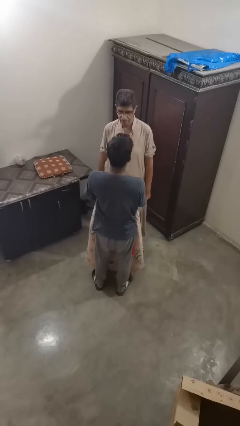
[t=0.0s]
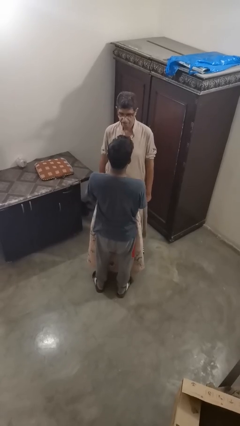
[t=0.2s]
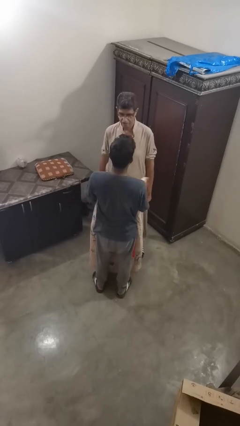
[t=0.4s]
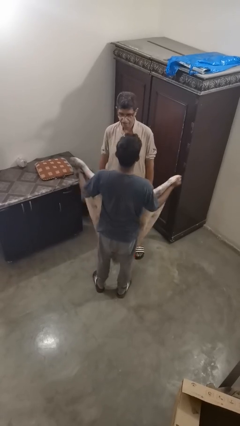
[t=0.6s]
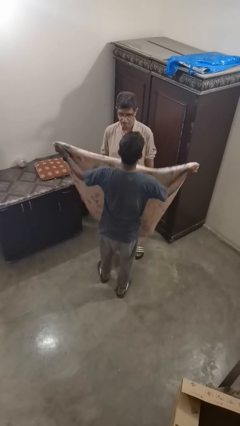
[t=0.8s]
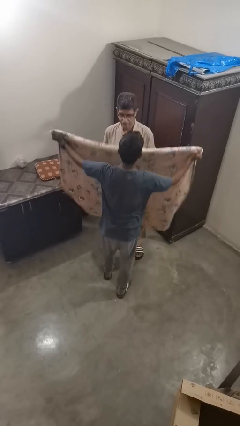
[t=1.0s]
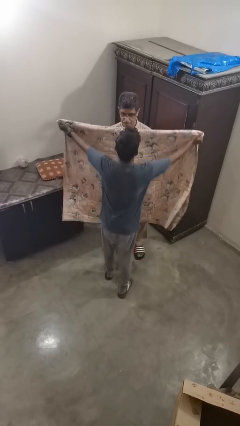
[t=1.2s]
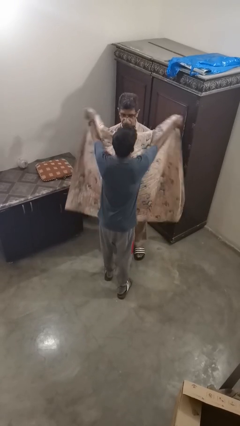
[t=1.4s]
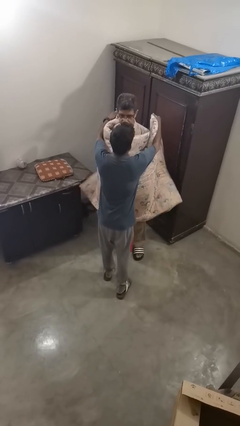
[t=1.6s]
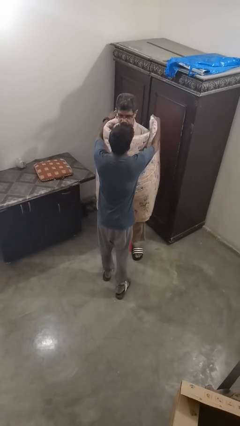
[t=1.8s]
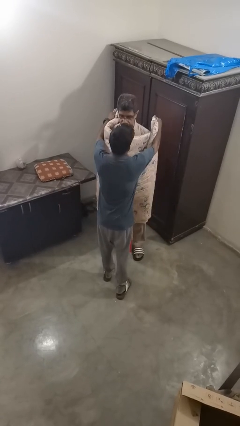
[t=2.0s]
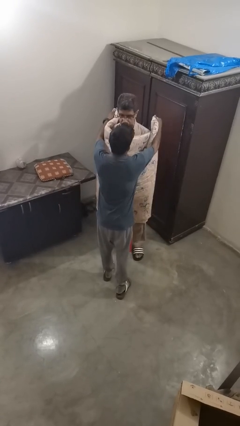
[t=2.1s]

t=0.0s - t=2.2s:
person covers friend with blanket

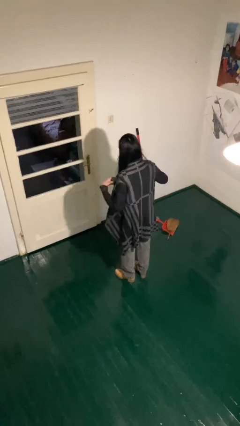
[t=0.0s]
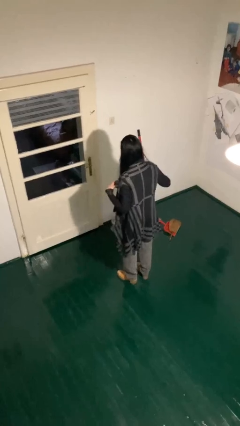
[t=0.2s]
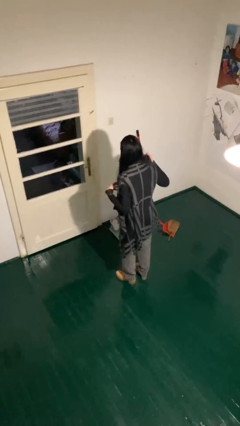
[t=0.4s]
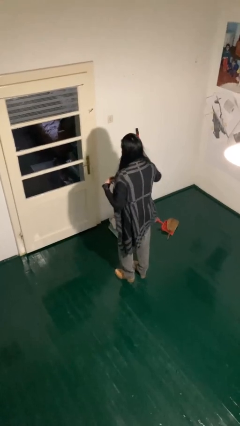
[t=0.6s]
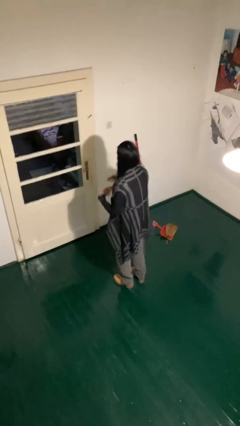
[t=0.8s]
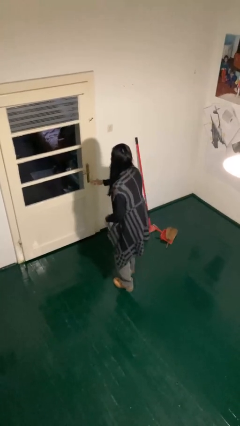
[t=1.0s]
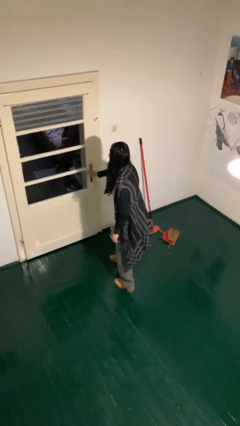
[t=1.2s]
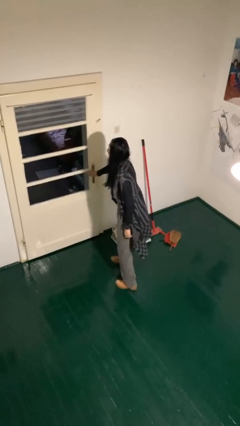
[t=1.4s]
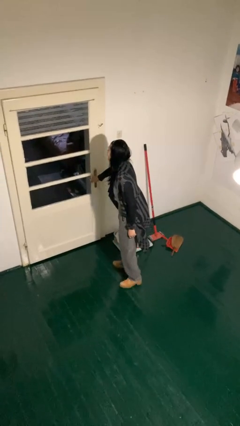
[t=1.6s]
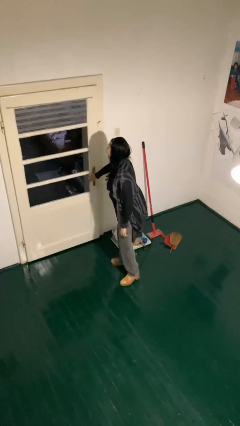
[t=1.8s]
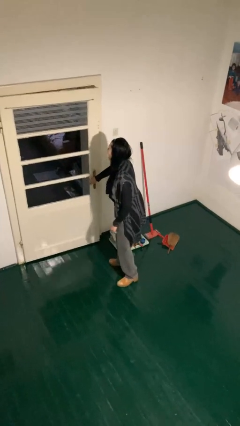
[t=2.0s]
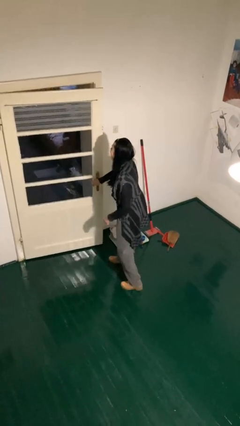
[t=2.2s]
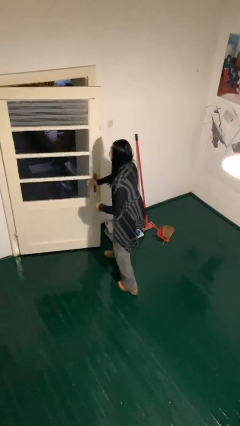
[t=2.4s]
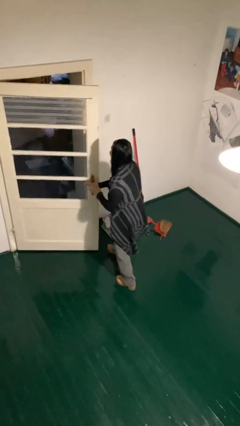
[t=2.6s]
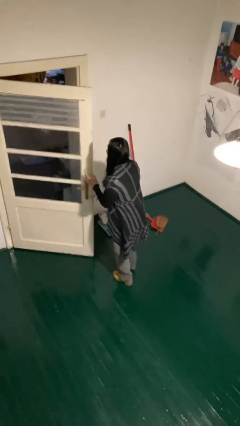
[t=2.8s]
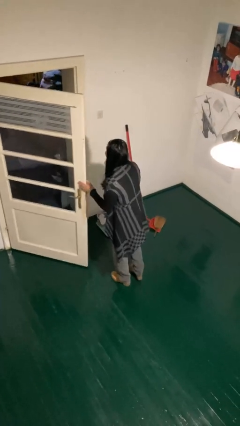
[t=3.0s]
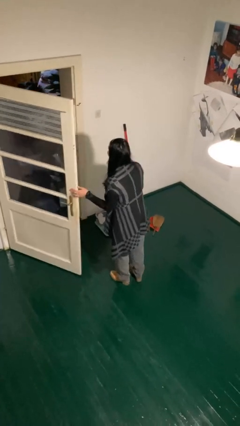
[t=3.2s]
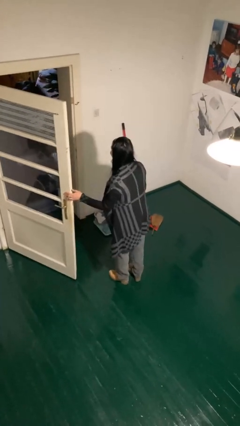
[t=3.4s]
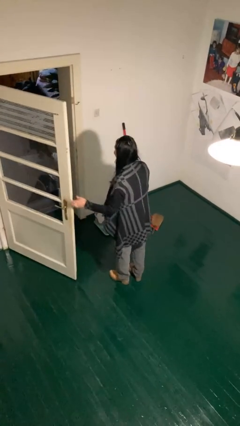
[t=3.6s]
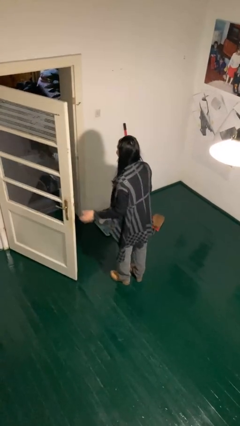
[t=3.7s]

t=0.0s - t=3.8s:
person opens facility door

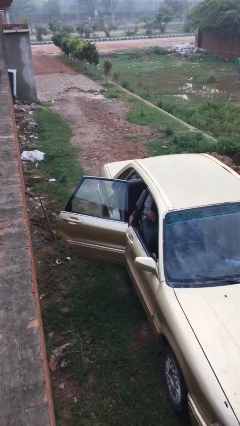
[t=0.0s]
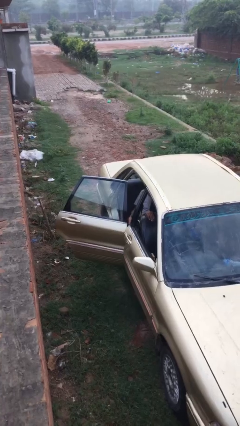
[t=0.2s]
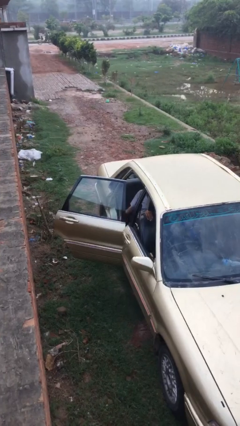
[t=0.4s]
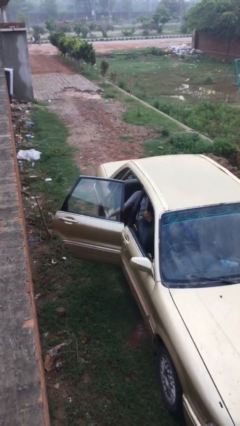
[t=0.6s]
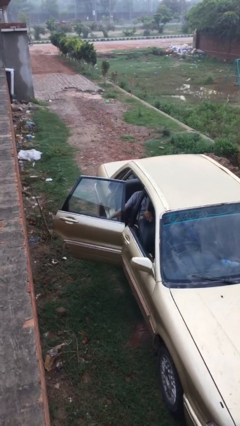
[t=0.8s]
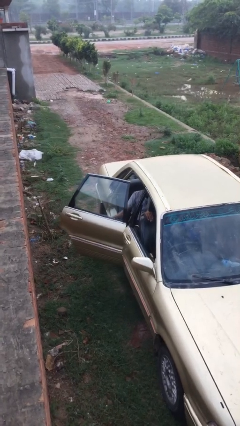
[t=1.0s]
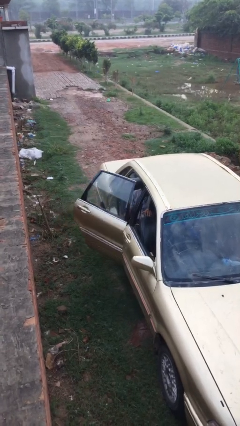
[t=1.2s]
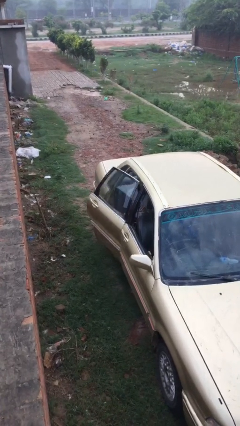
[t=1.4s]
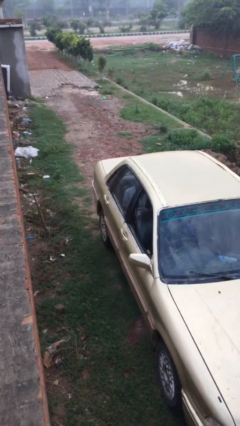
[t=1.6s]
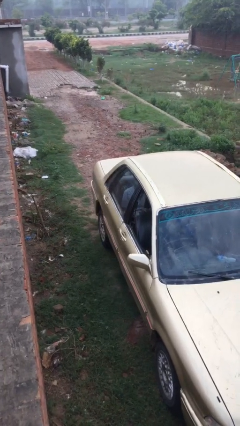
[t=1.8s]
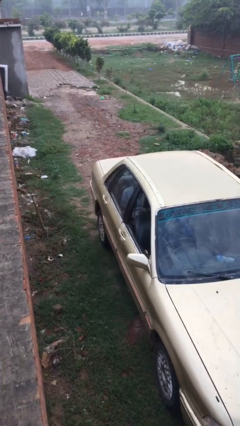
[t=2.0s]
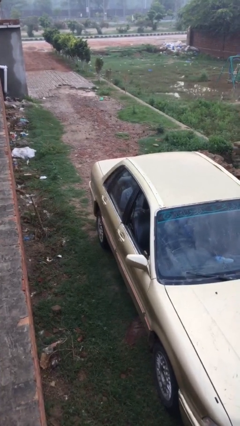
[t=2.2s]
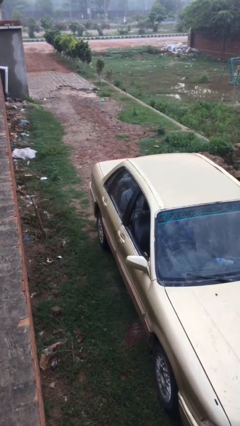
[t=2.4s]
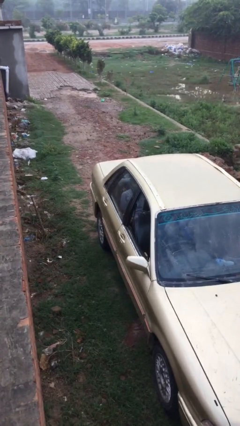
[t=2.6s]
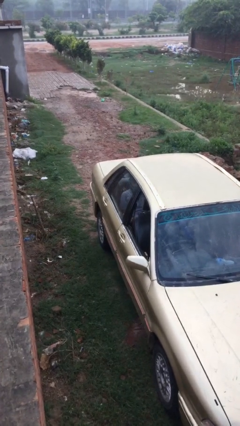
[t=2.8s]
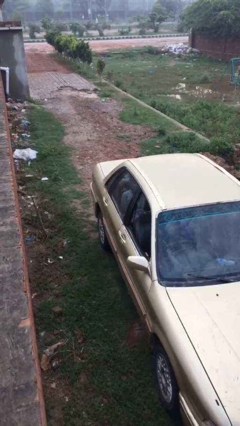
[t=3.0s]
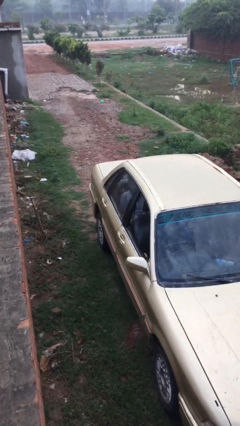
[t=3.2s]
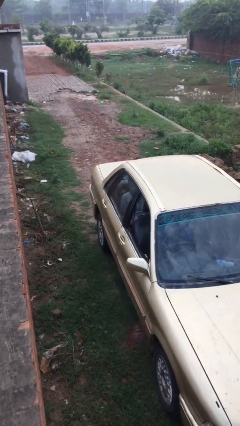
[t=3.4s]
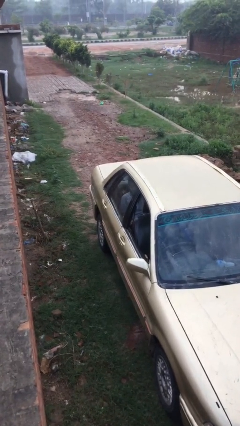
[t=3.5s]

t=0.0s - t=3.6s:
person closes car door

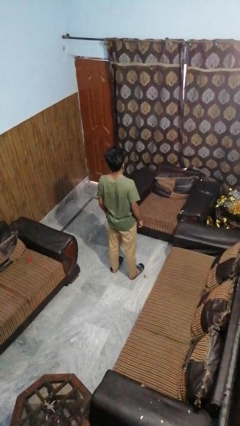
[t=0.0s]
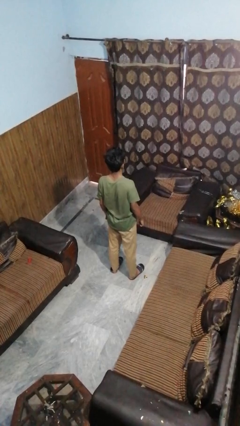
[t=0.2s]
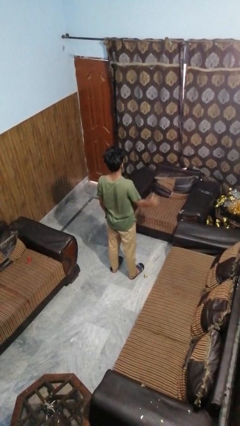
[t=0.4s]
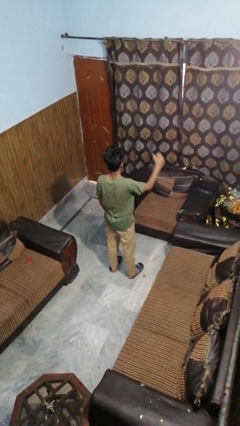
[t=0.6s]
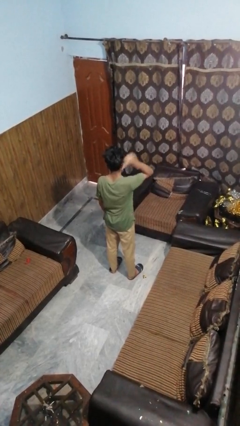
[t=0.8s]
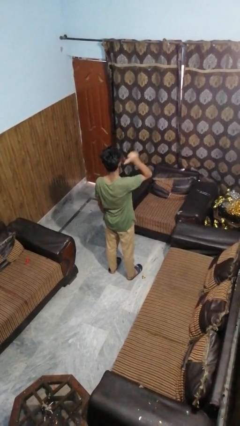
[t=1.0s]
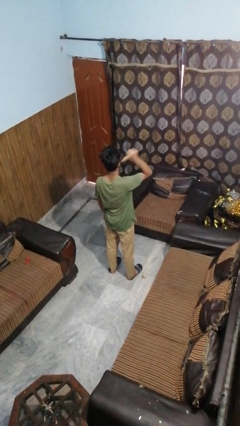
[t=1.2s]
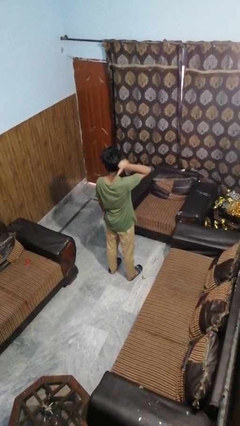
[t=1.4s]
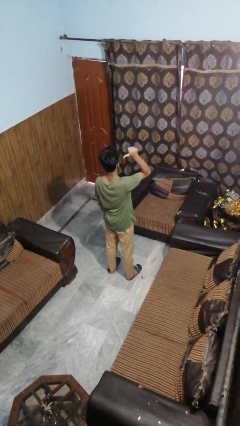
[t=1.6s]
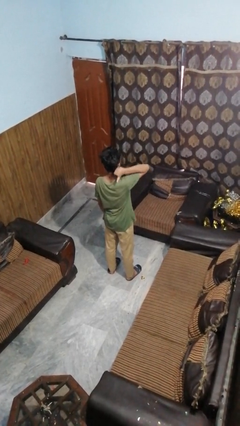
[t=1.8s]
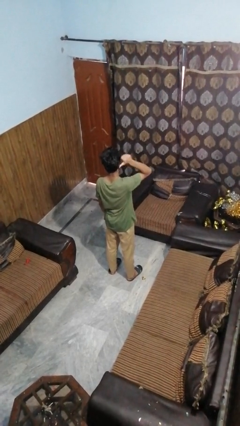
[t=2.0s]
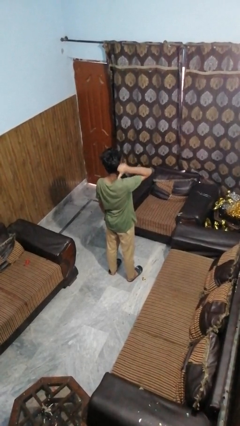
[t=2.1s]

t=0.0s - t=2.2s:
person gestures behind me

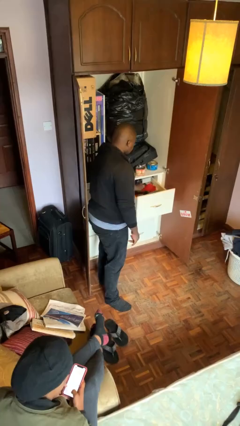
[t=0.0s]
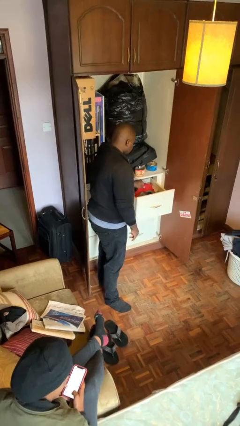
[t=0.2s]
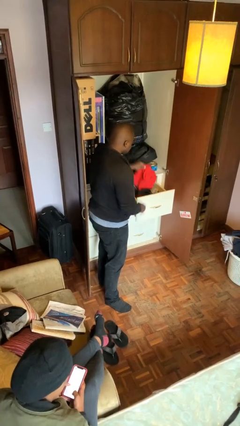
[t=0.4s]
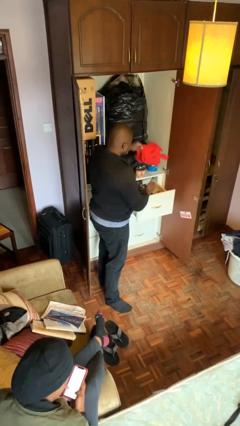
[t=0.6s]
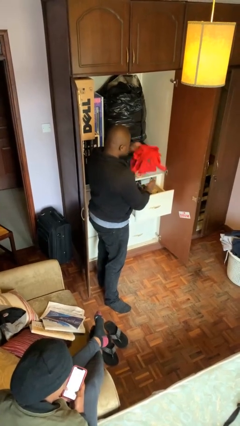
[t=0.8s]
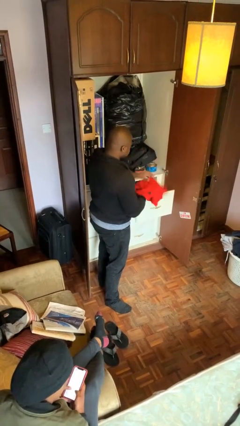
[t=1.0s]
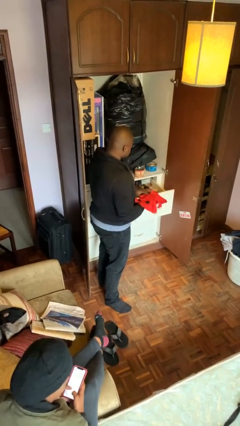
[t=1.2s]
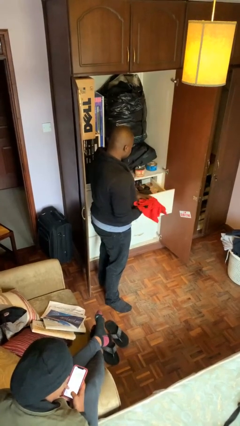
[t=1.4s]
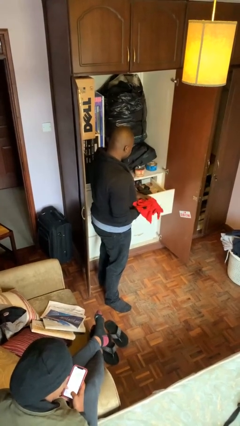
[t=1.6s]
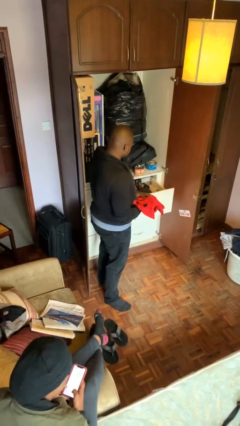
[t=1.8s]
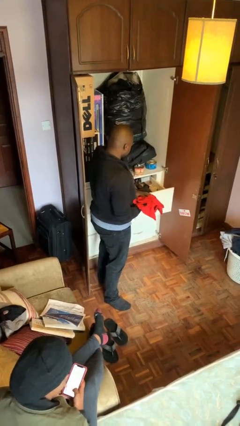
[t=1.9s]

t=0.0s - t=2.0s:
person takes clothes from dresser

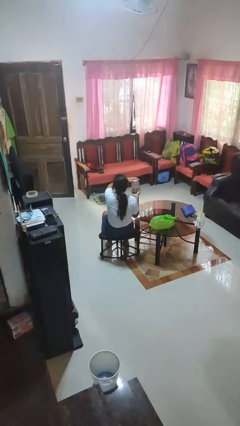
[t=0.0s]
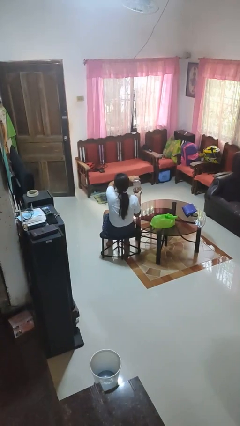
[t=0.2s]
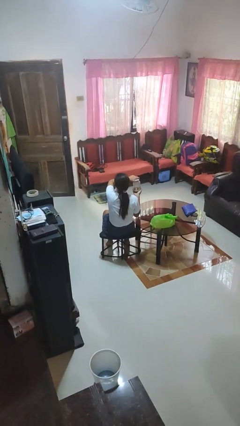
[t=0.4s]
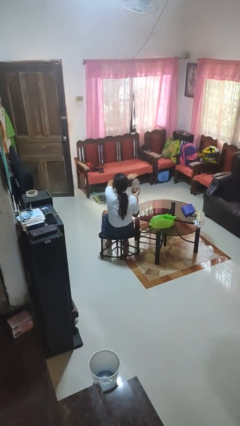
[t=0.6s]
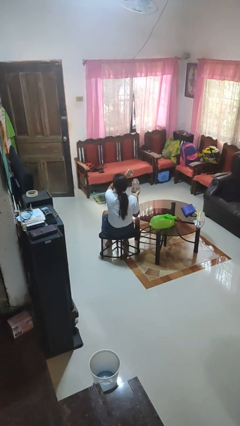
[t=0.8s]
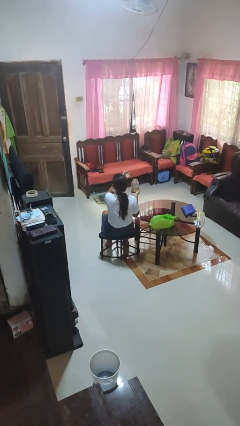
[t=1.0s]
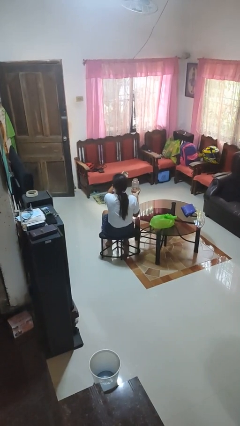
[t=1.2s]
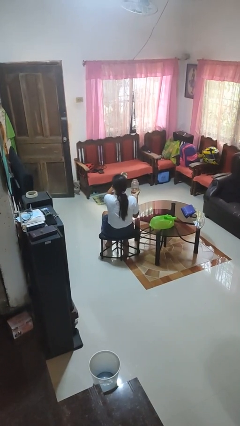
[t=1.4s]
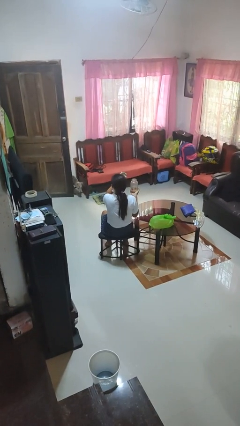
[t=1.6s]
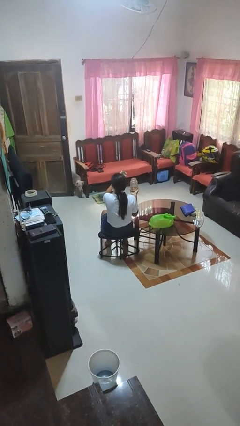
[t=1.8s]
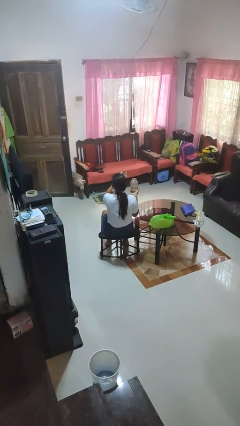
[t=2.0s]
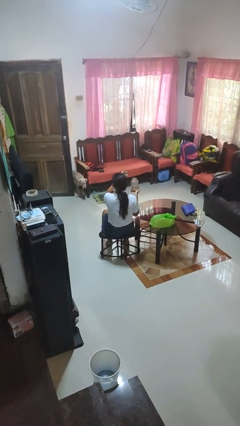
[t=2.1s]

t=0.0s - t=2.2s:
person opens jar

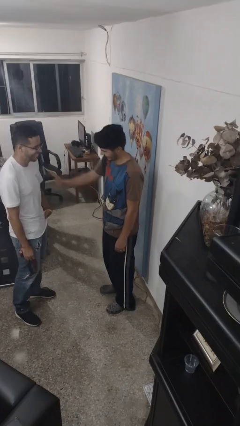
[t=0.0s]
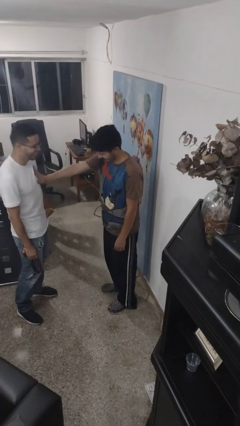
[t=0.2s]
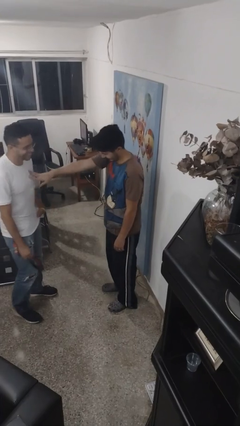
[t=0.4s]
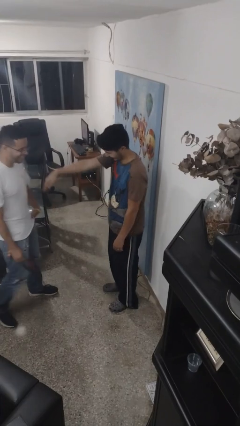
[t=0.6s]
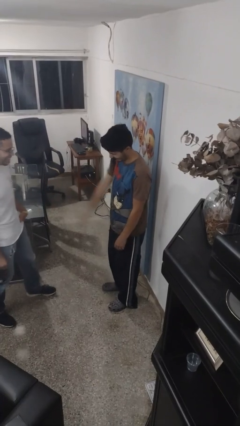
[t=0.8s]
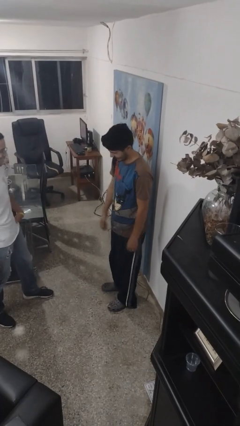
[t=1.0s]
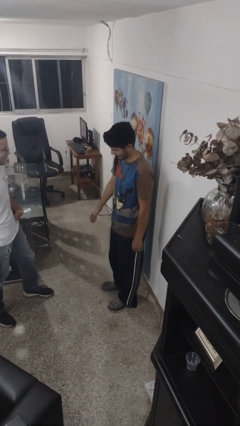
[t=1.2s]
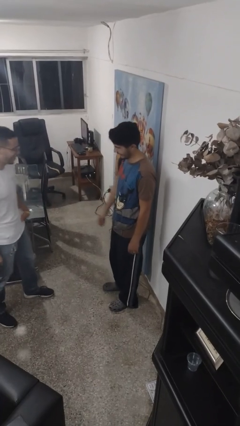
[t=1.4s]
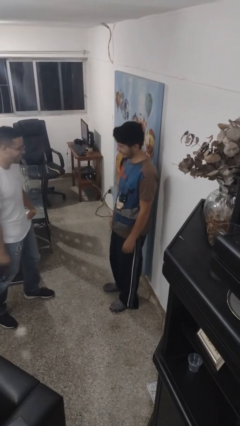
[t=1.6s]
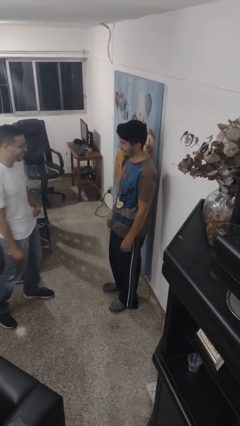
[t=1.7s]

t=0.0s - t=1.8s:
person shoves person
